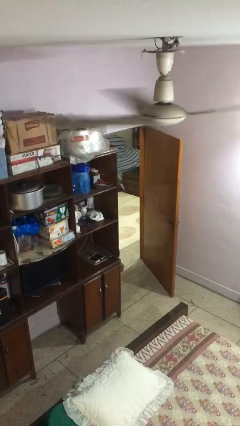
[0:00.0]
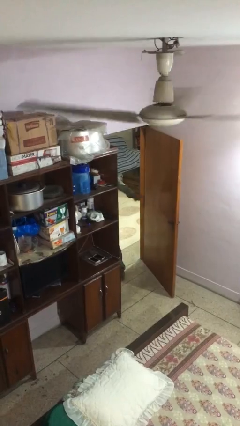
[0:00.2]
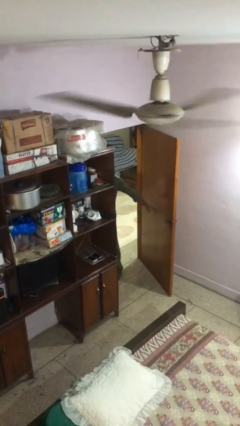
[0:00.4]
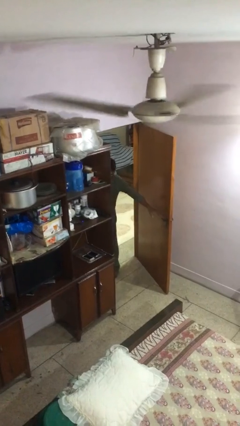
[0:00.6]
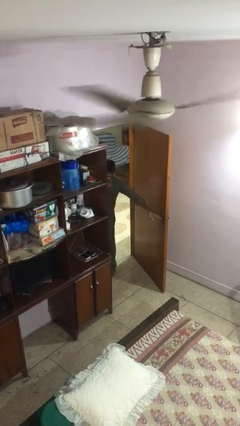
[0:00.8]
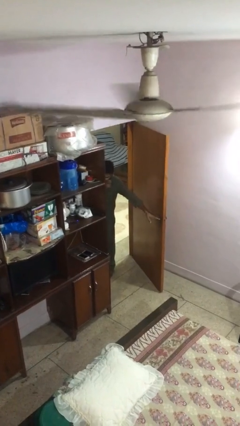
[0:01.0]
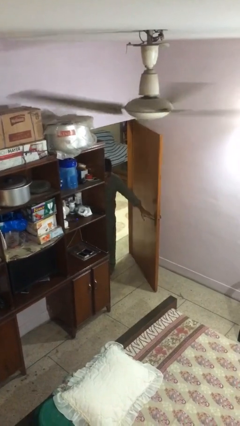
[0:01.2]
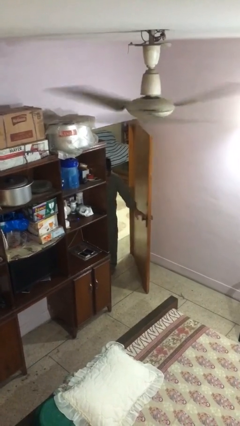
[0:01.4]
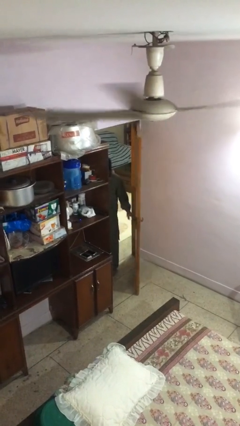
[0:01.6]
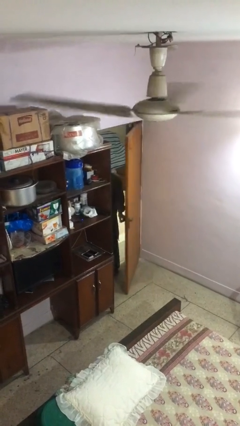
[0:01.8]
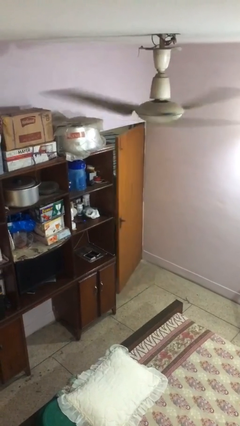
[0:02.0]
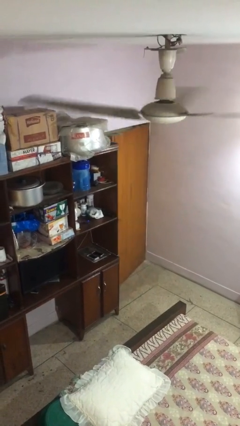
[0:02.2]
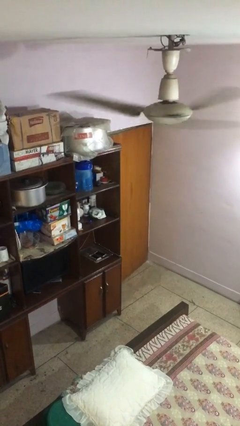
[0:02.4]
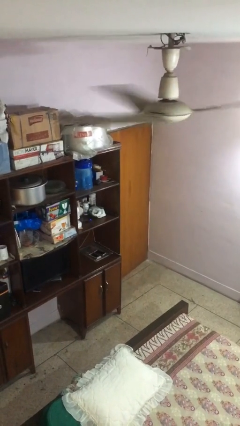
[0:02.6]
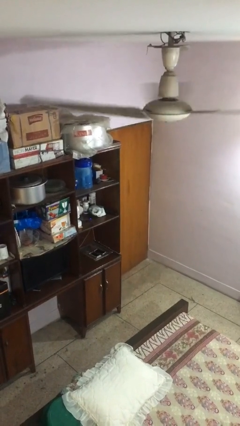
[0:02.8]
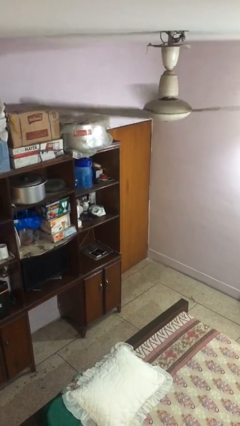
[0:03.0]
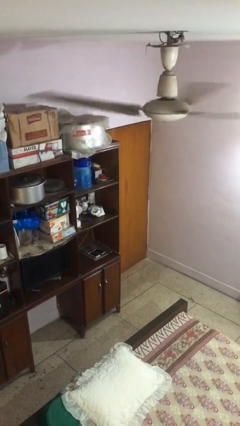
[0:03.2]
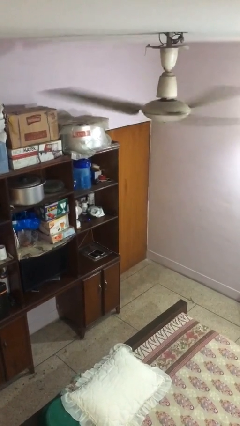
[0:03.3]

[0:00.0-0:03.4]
person closes facility door

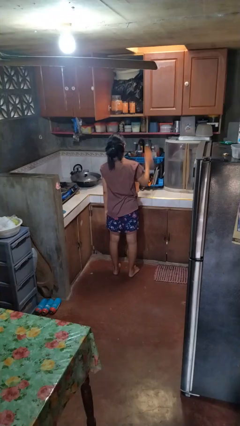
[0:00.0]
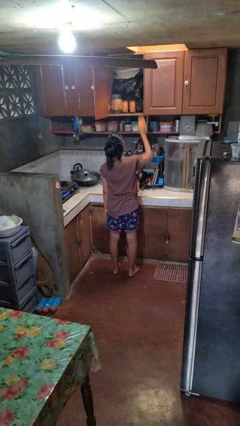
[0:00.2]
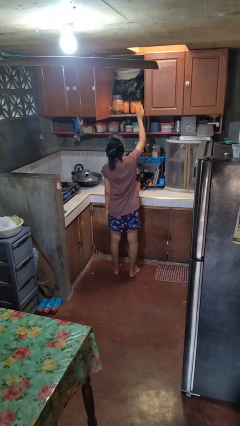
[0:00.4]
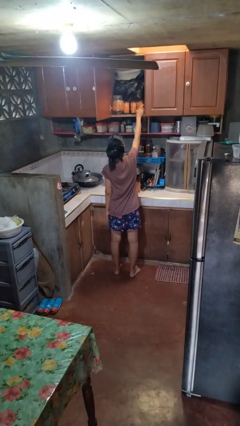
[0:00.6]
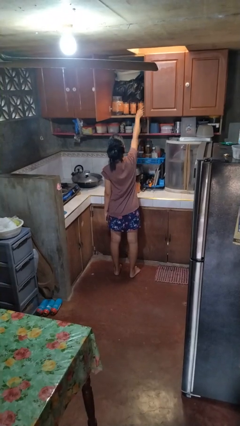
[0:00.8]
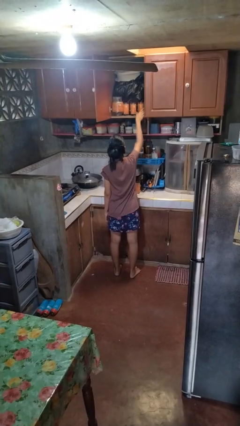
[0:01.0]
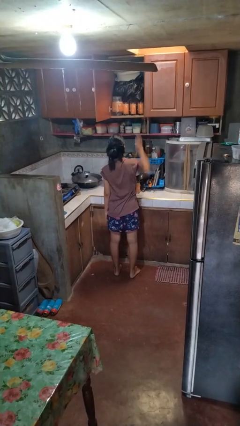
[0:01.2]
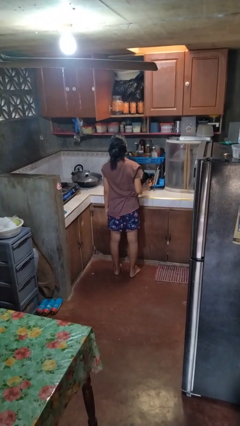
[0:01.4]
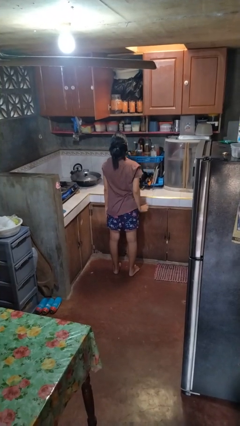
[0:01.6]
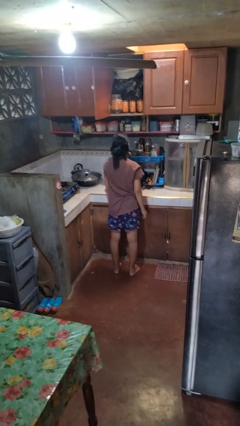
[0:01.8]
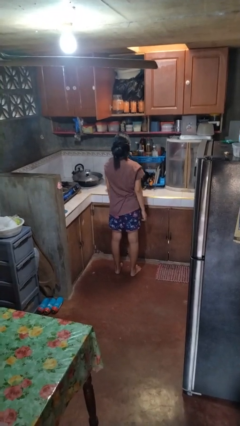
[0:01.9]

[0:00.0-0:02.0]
person puts object in cabinet

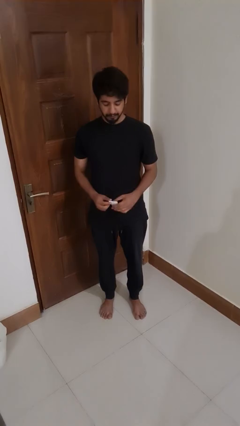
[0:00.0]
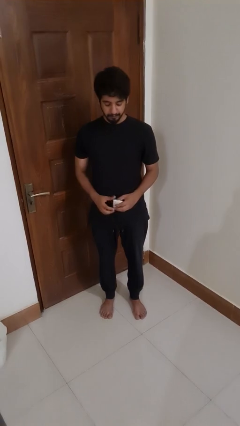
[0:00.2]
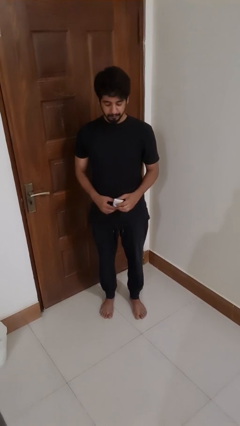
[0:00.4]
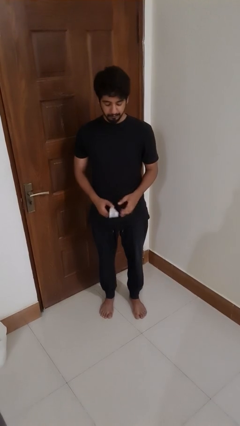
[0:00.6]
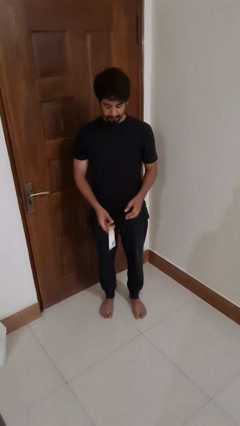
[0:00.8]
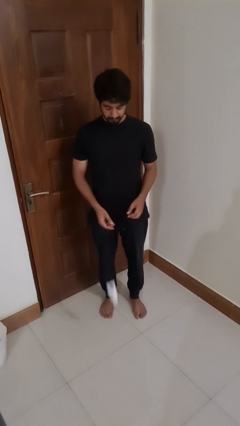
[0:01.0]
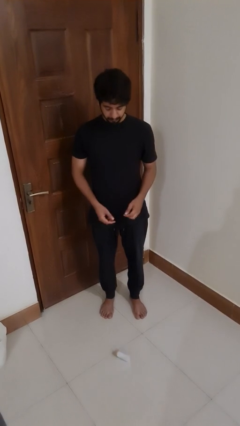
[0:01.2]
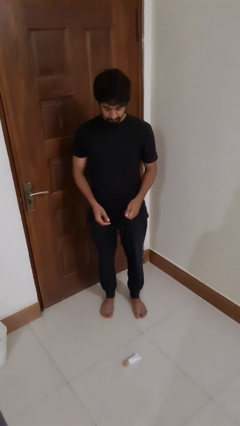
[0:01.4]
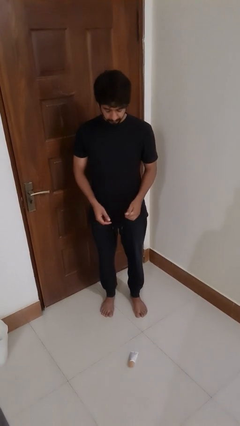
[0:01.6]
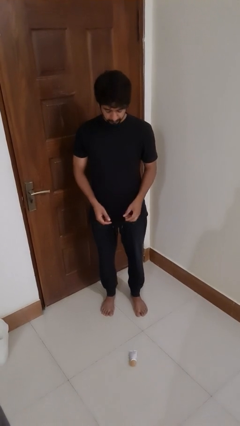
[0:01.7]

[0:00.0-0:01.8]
person drops object

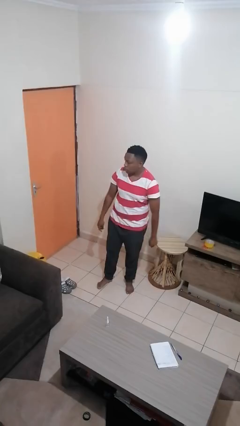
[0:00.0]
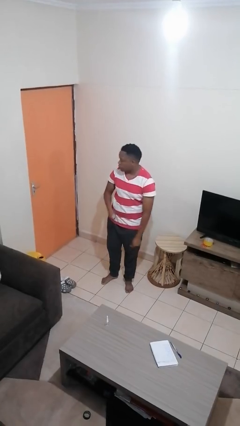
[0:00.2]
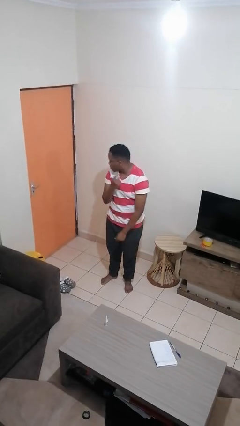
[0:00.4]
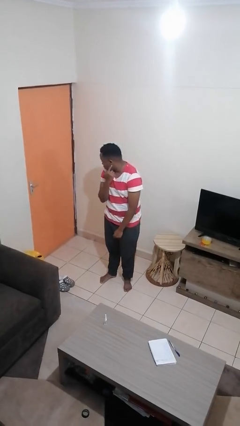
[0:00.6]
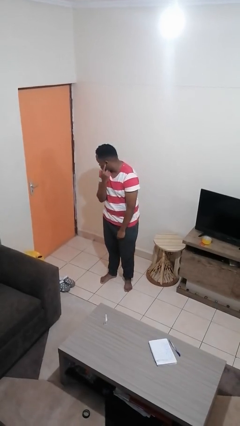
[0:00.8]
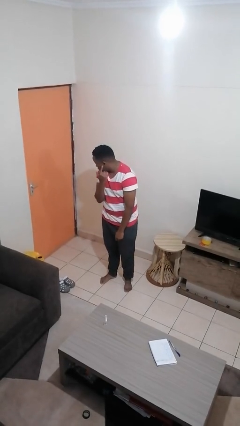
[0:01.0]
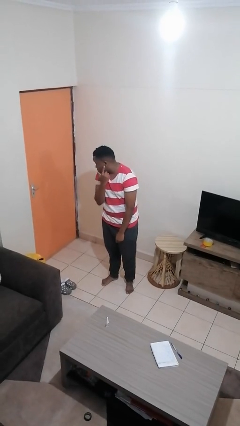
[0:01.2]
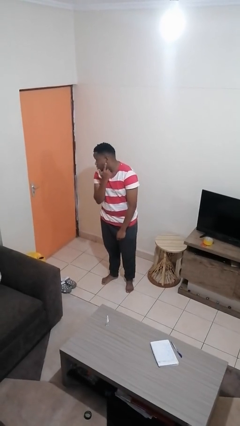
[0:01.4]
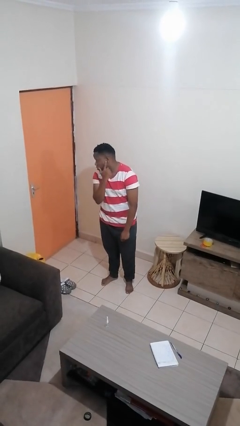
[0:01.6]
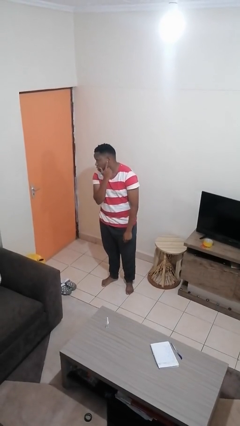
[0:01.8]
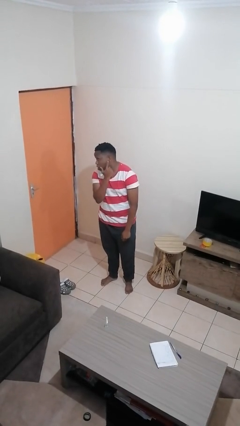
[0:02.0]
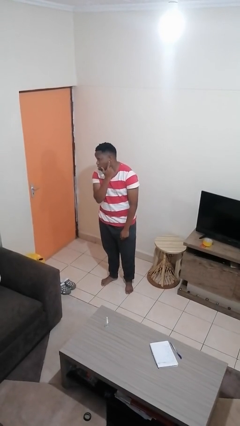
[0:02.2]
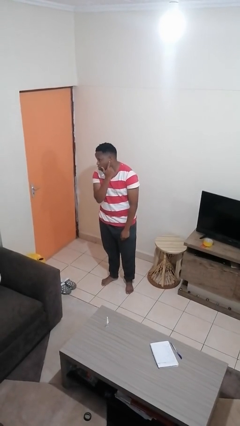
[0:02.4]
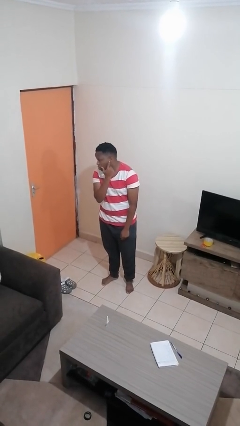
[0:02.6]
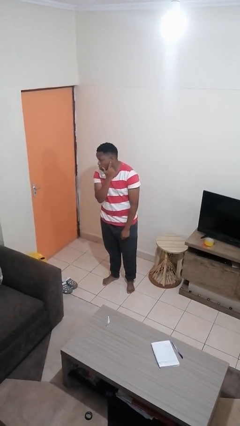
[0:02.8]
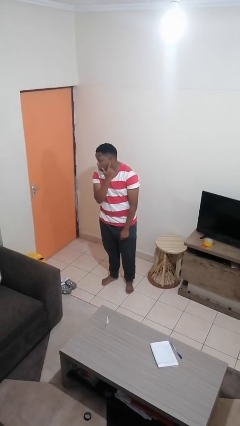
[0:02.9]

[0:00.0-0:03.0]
person gestures listen closely

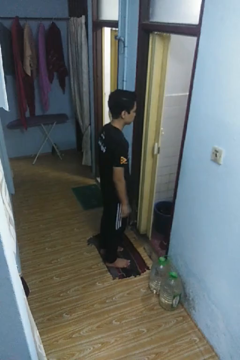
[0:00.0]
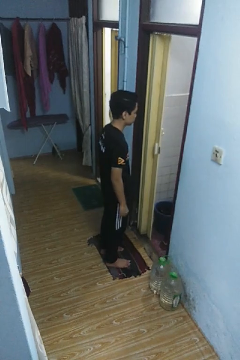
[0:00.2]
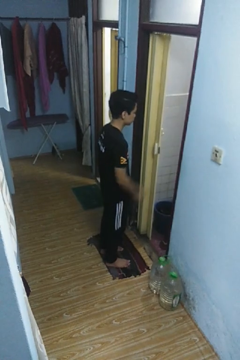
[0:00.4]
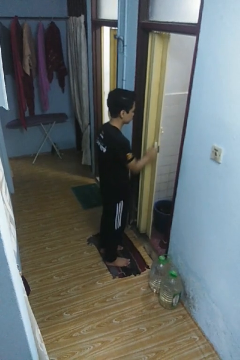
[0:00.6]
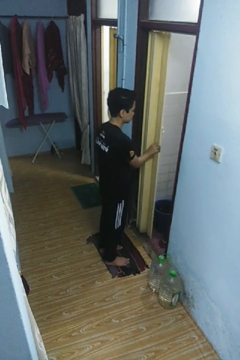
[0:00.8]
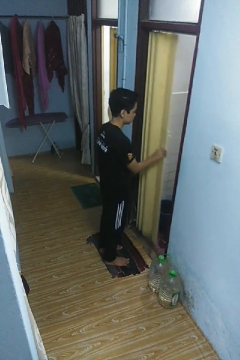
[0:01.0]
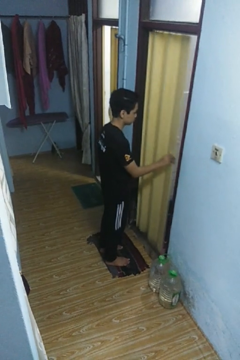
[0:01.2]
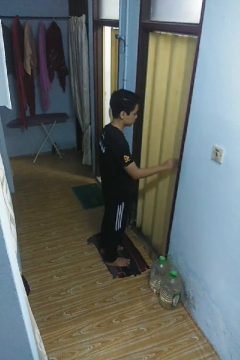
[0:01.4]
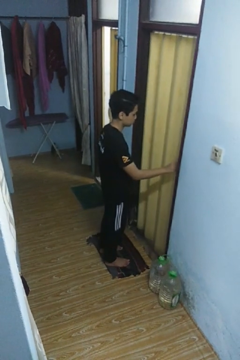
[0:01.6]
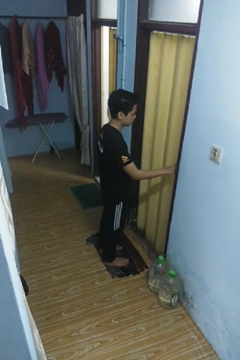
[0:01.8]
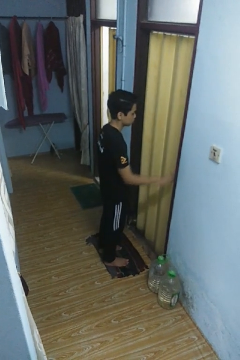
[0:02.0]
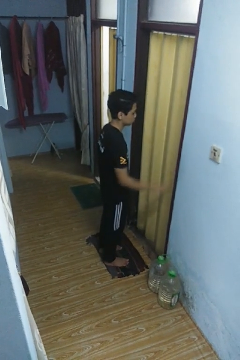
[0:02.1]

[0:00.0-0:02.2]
person closes sliding door

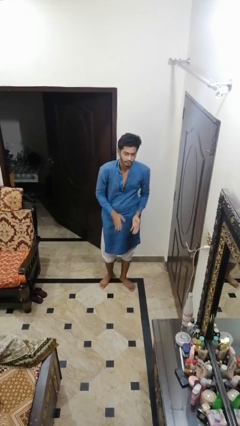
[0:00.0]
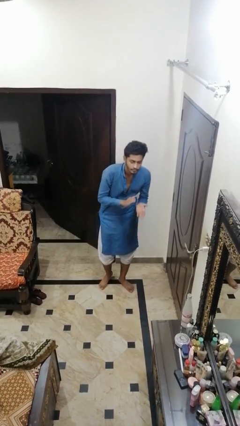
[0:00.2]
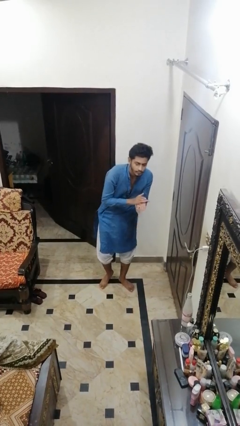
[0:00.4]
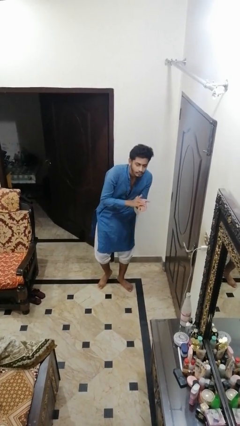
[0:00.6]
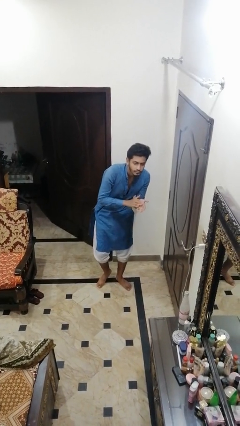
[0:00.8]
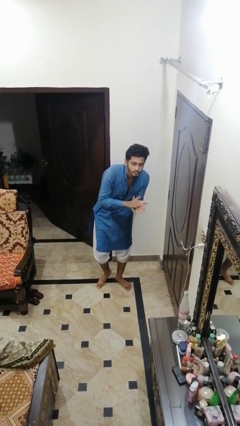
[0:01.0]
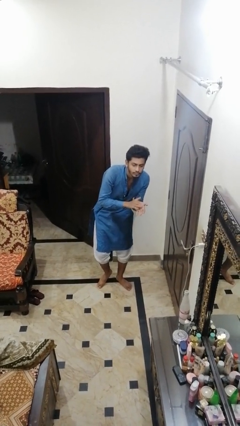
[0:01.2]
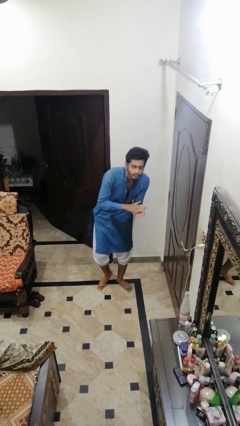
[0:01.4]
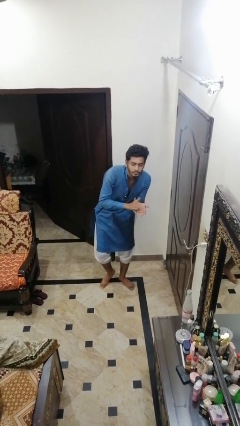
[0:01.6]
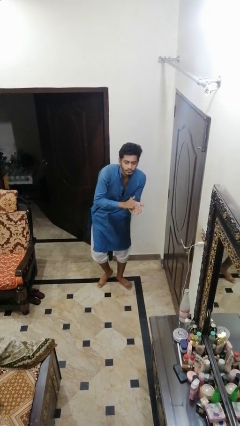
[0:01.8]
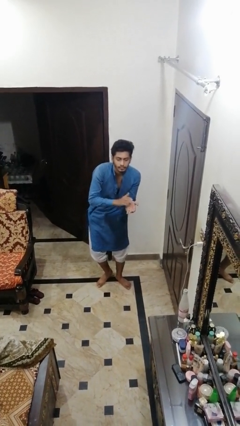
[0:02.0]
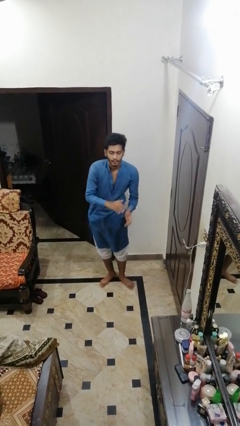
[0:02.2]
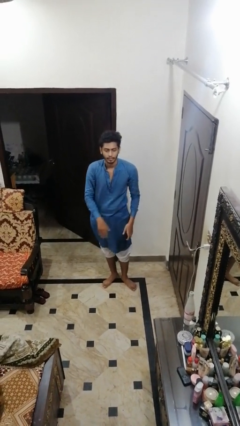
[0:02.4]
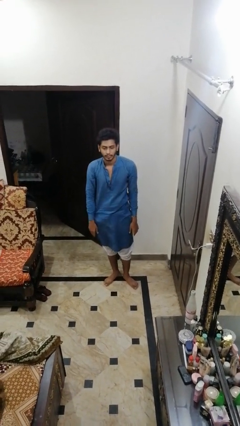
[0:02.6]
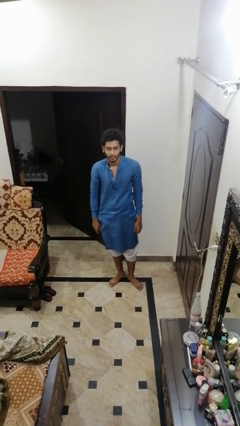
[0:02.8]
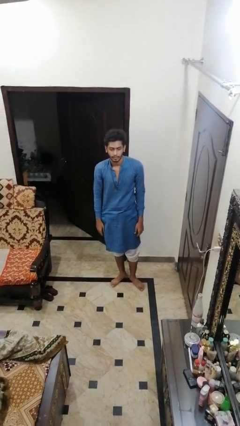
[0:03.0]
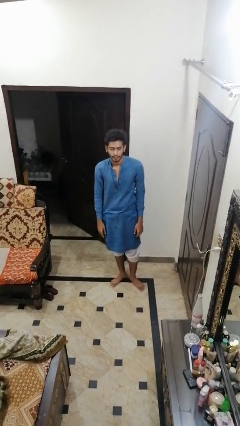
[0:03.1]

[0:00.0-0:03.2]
person claps hands

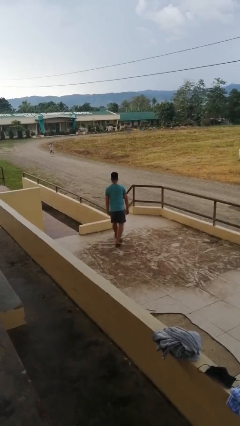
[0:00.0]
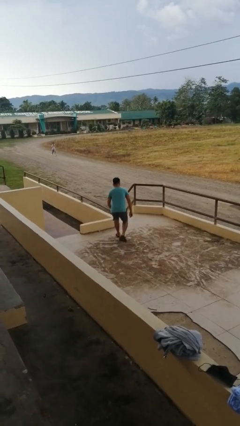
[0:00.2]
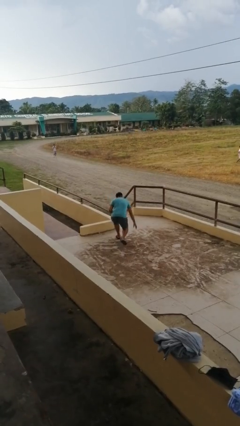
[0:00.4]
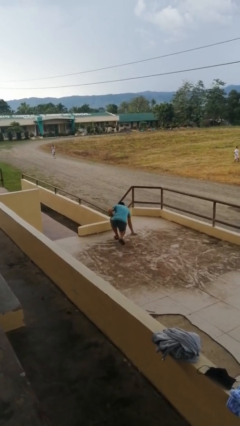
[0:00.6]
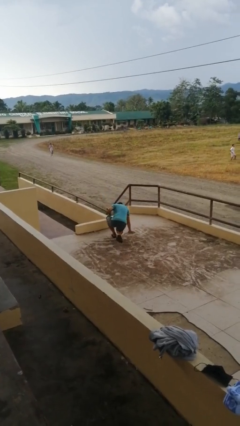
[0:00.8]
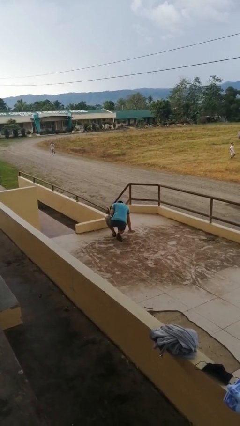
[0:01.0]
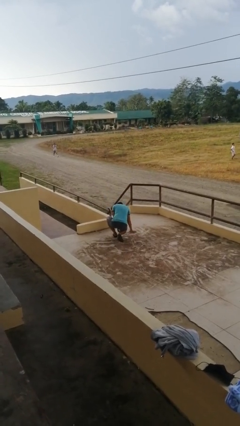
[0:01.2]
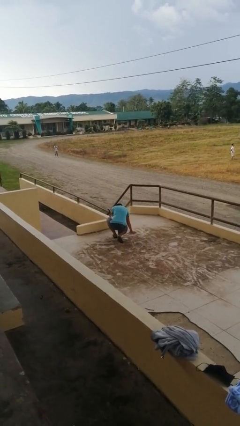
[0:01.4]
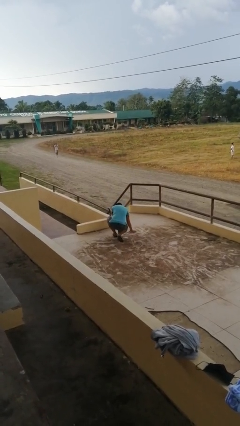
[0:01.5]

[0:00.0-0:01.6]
person lies down on floor

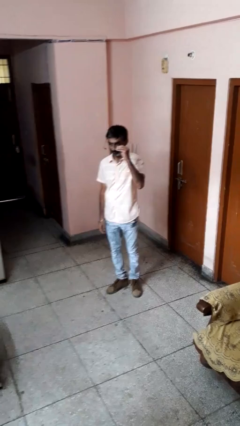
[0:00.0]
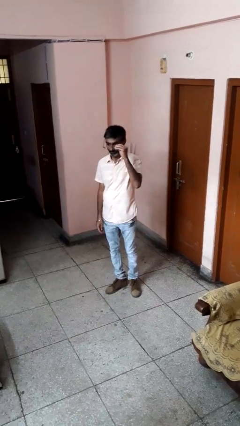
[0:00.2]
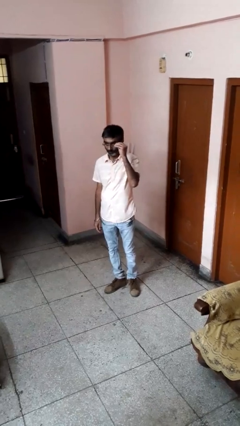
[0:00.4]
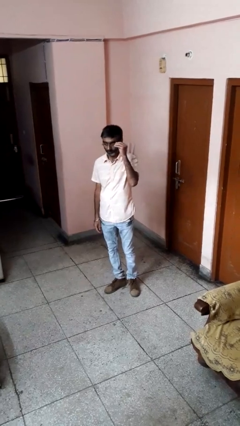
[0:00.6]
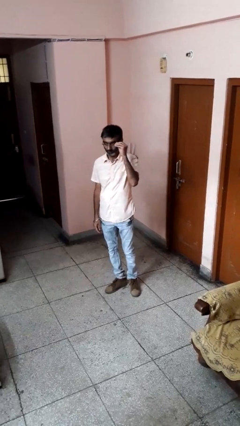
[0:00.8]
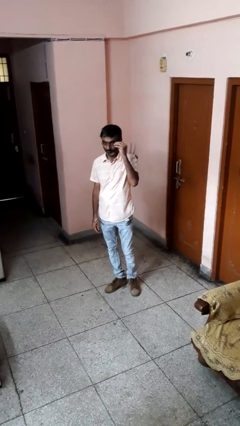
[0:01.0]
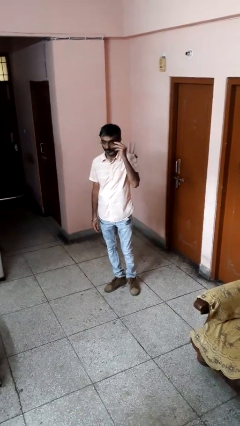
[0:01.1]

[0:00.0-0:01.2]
person puts on glasses
